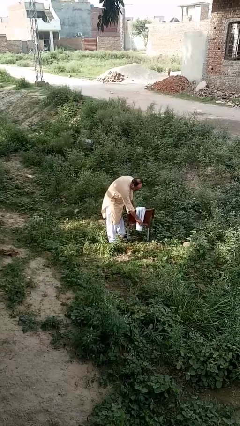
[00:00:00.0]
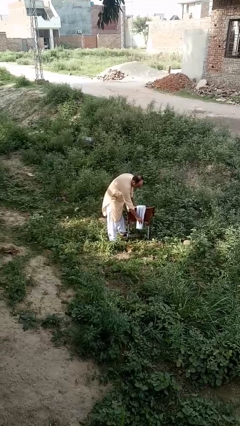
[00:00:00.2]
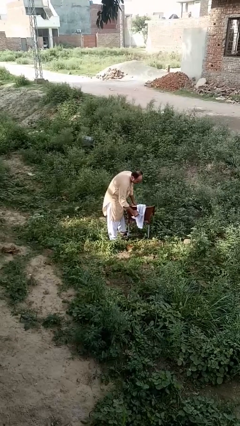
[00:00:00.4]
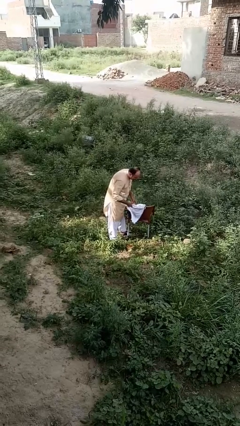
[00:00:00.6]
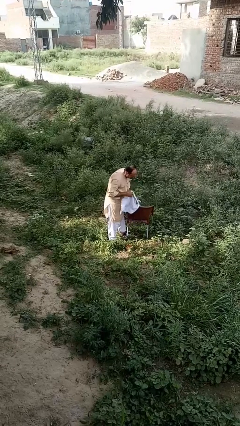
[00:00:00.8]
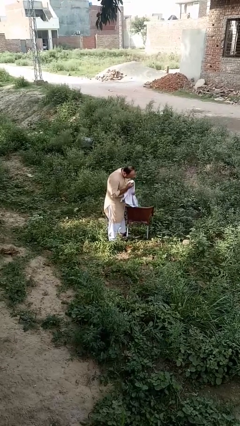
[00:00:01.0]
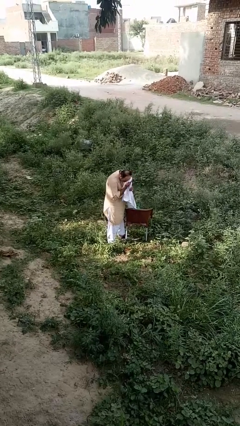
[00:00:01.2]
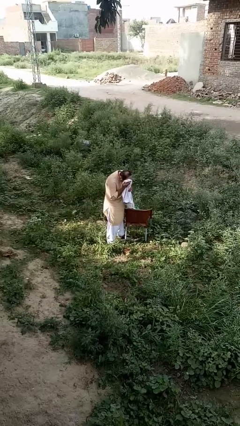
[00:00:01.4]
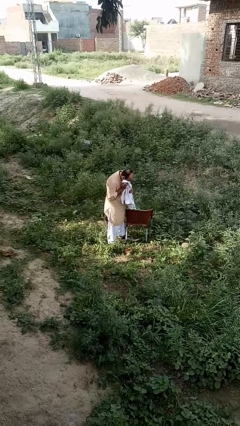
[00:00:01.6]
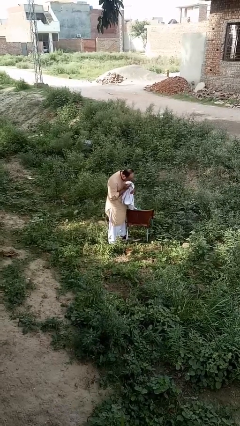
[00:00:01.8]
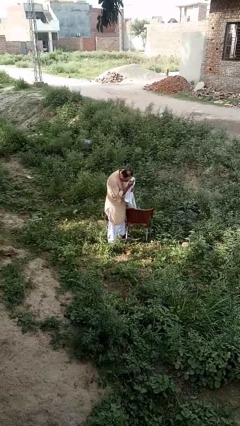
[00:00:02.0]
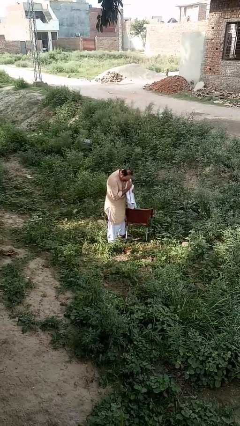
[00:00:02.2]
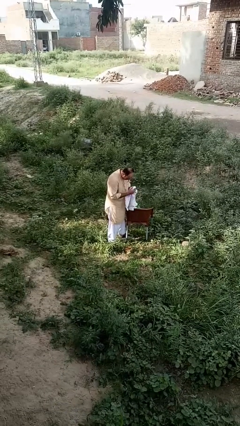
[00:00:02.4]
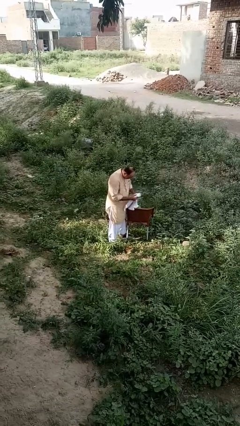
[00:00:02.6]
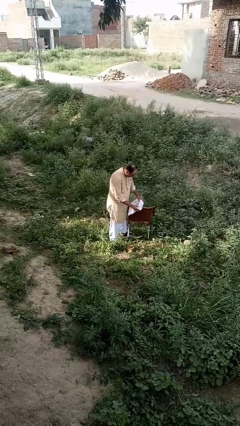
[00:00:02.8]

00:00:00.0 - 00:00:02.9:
person dries face with towel

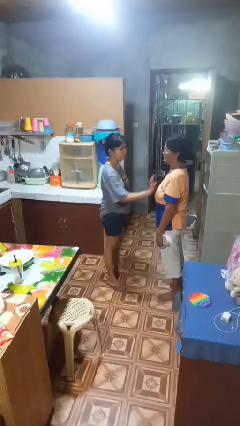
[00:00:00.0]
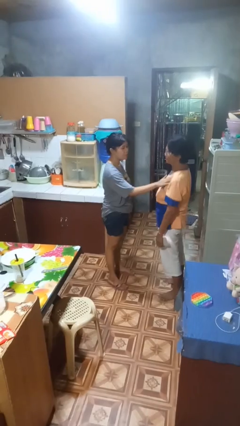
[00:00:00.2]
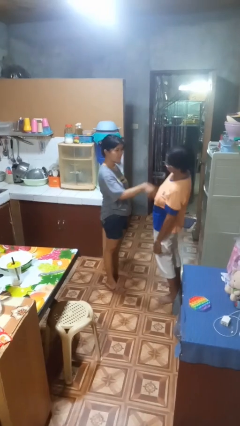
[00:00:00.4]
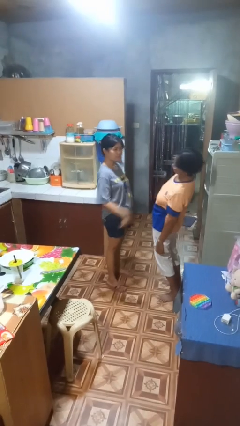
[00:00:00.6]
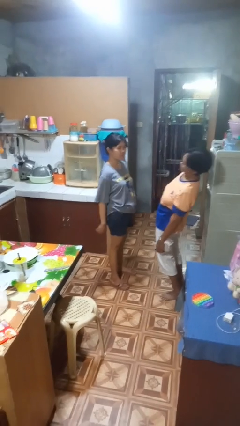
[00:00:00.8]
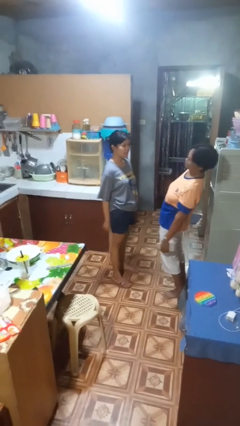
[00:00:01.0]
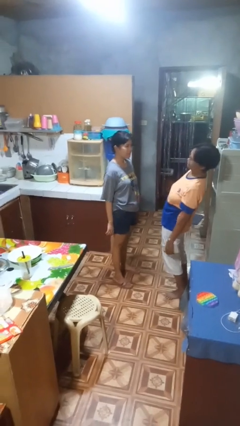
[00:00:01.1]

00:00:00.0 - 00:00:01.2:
person shoves person

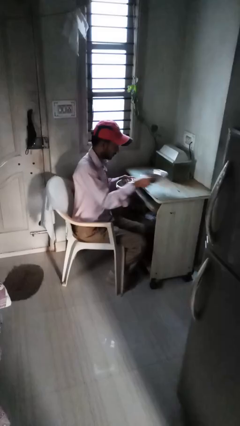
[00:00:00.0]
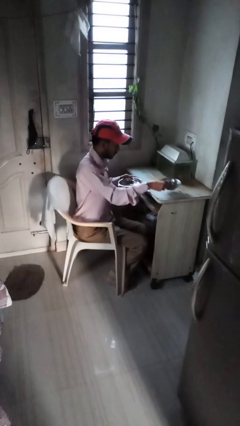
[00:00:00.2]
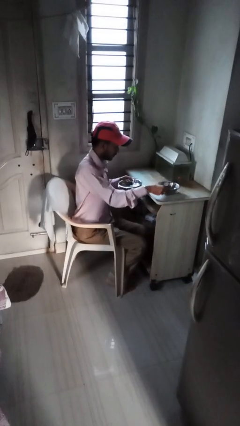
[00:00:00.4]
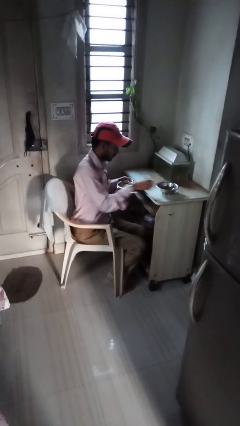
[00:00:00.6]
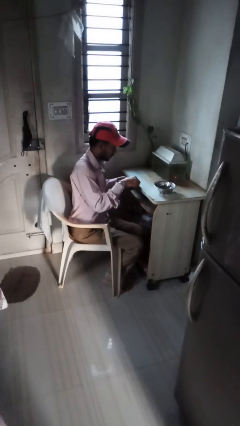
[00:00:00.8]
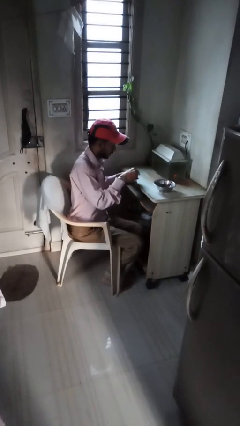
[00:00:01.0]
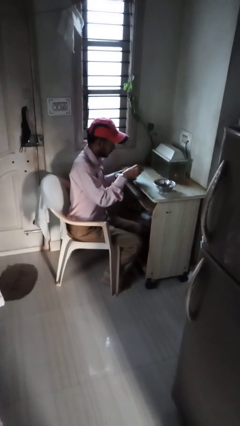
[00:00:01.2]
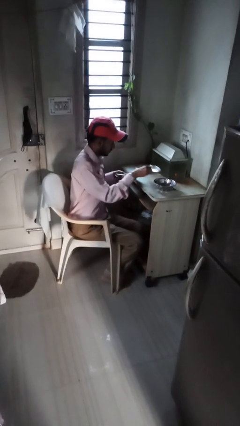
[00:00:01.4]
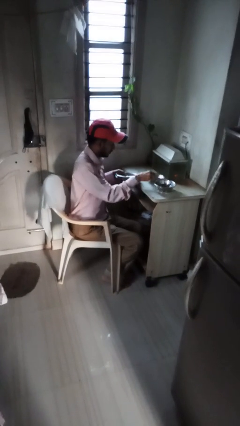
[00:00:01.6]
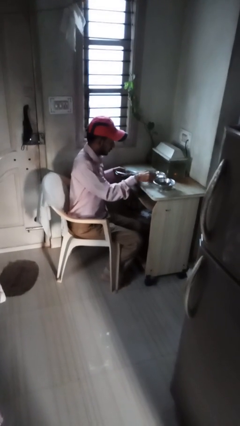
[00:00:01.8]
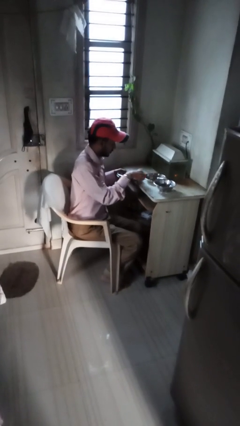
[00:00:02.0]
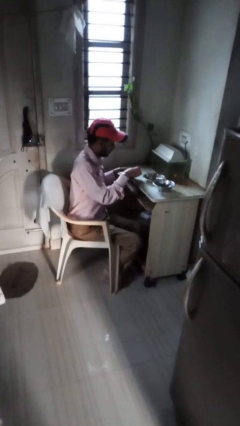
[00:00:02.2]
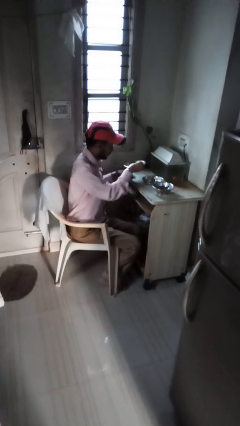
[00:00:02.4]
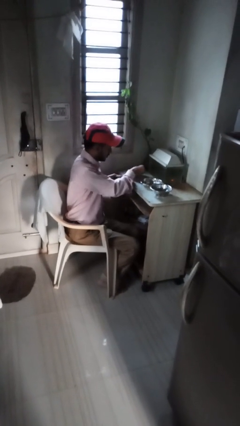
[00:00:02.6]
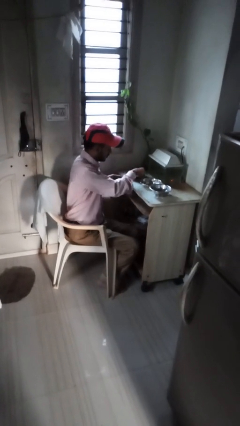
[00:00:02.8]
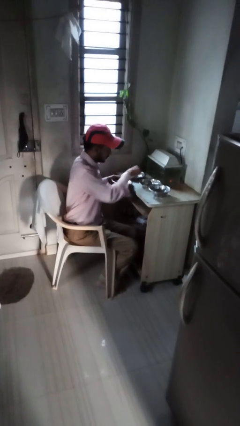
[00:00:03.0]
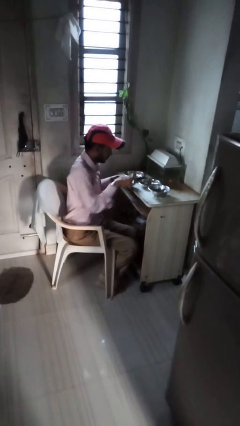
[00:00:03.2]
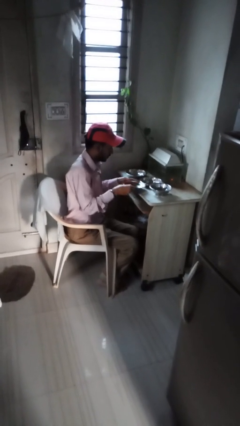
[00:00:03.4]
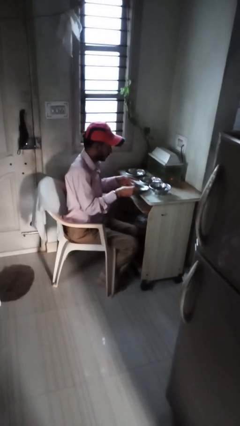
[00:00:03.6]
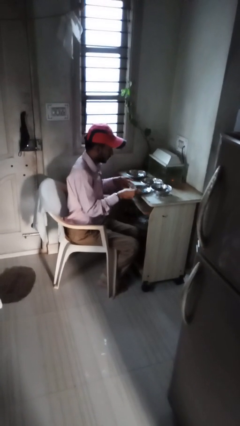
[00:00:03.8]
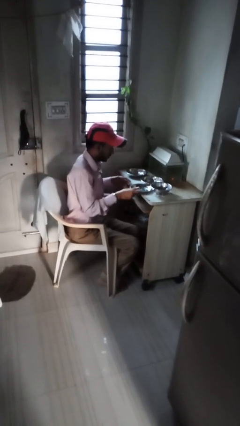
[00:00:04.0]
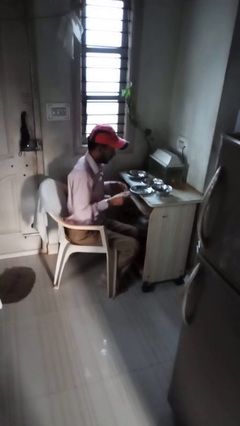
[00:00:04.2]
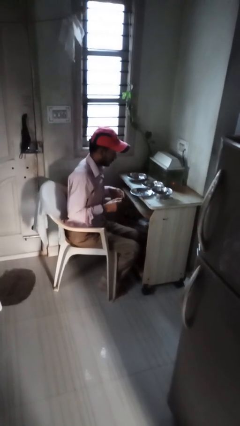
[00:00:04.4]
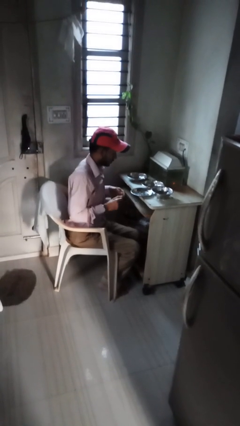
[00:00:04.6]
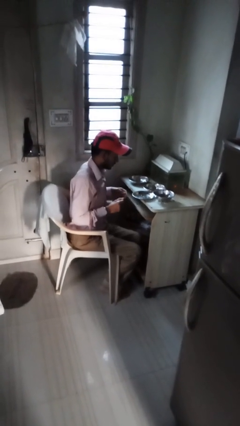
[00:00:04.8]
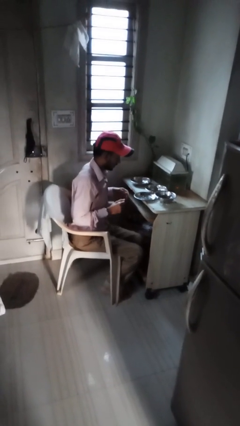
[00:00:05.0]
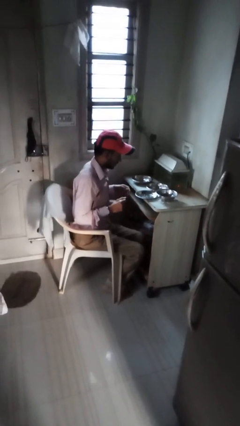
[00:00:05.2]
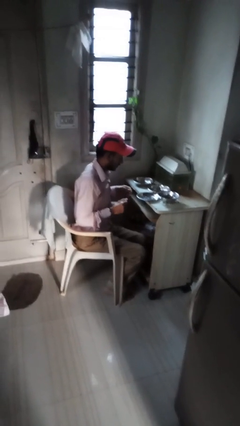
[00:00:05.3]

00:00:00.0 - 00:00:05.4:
person sets table

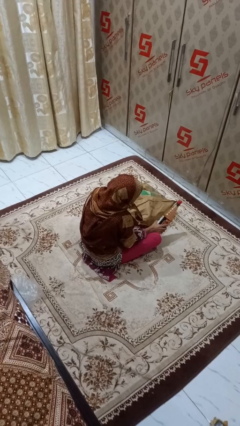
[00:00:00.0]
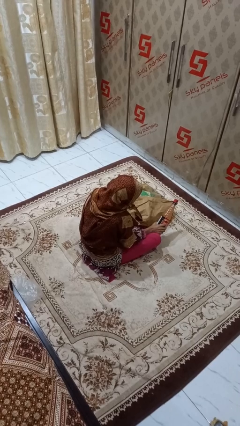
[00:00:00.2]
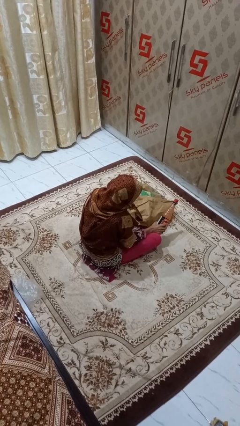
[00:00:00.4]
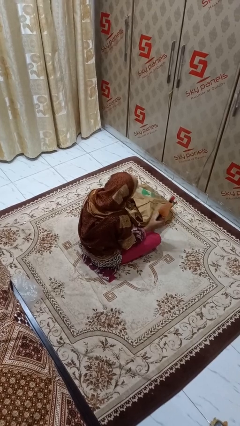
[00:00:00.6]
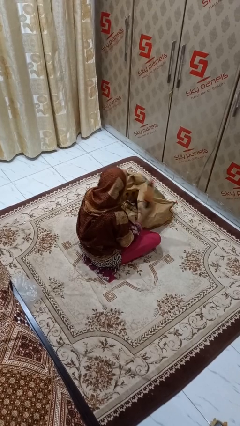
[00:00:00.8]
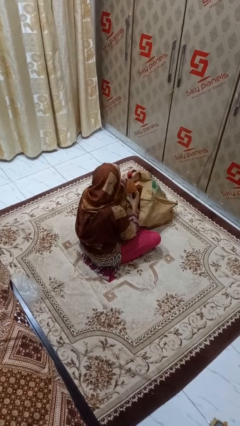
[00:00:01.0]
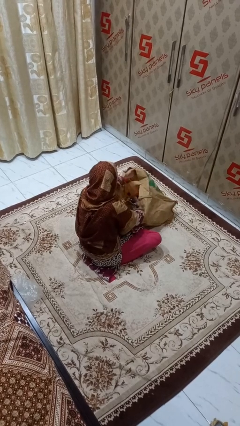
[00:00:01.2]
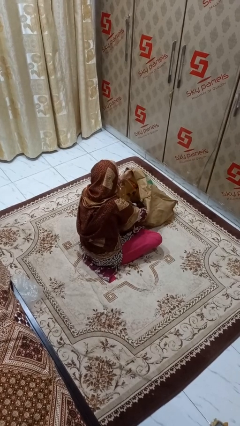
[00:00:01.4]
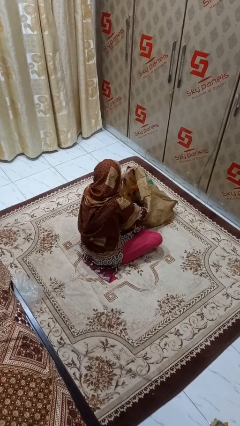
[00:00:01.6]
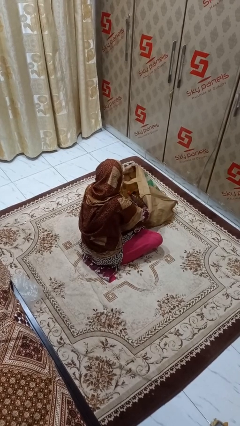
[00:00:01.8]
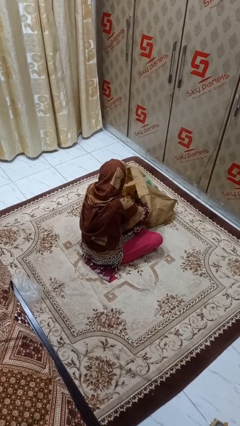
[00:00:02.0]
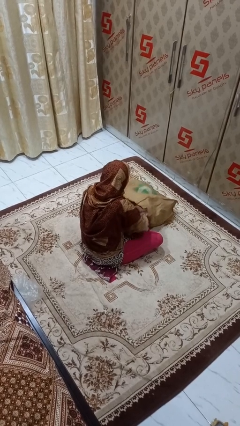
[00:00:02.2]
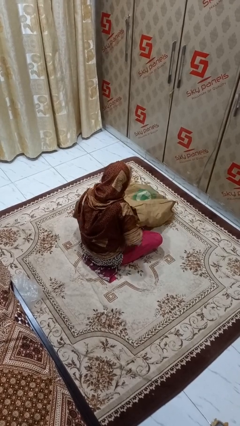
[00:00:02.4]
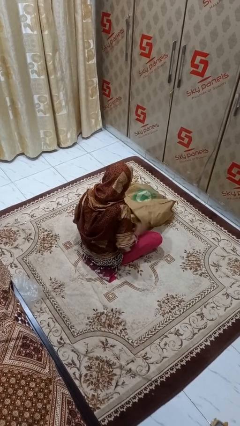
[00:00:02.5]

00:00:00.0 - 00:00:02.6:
person puts object into bag

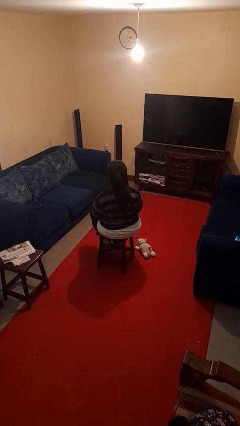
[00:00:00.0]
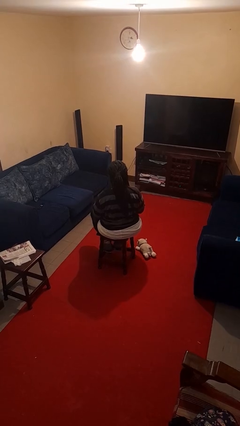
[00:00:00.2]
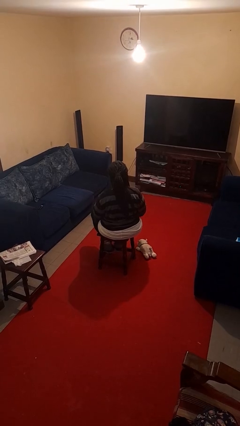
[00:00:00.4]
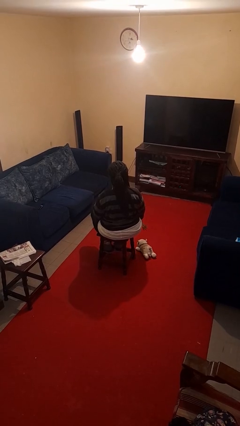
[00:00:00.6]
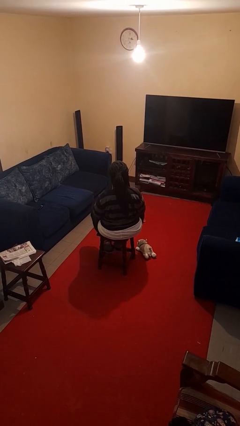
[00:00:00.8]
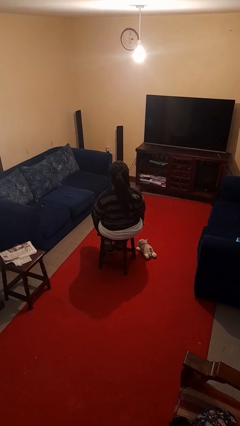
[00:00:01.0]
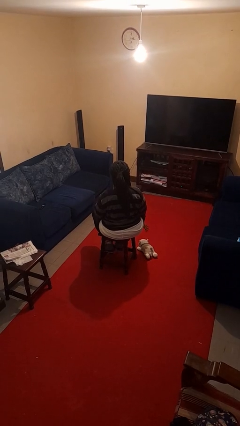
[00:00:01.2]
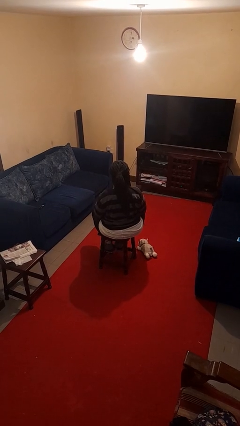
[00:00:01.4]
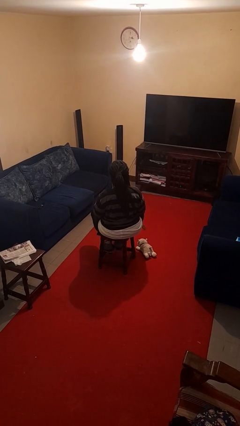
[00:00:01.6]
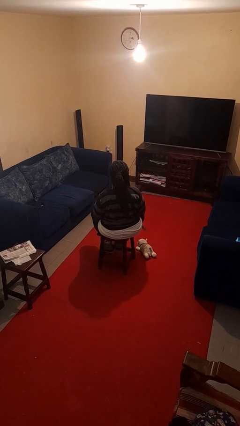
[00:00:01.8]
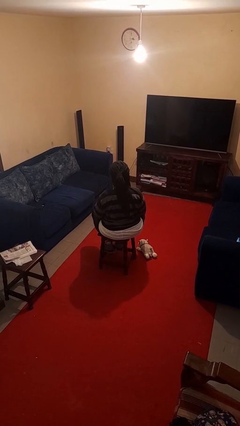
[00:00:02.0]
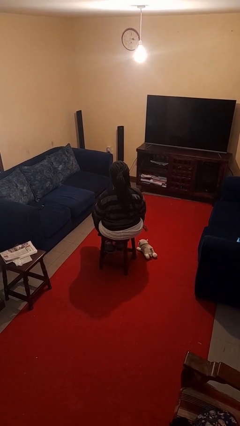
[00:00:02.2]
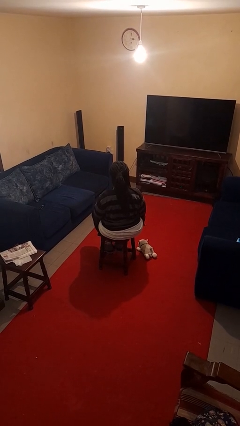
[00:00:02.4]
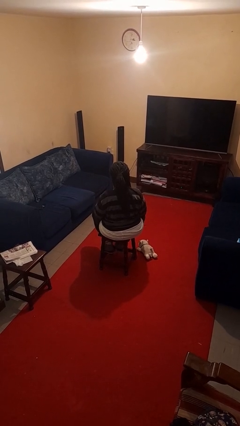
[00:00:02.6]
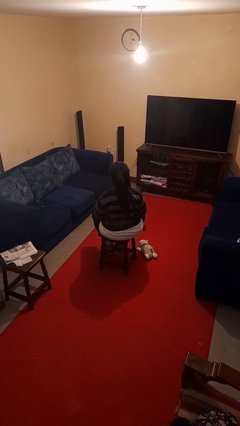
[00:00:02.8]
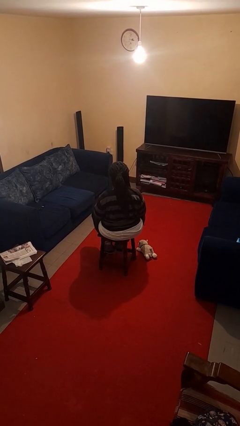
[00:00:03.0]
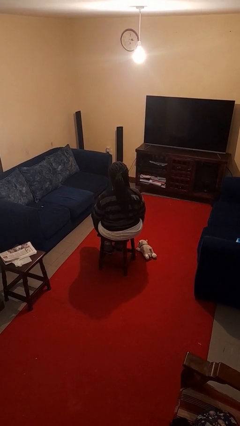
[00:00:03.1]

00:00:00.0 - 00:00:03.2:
person waves hand over object

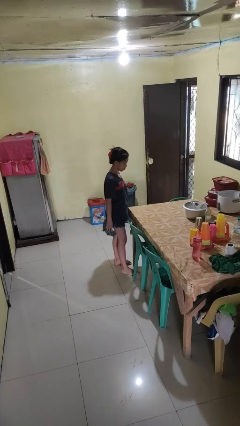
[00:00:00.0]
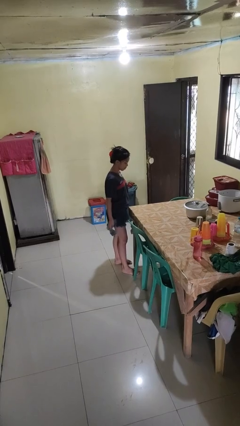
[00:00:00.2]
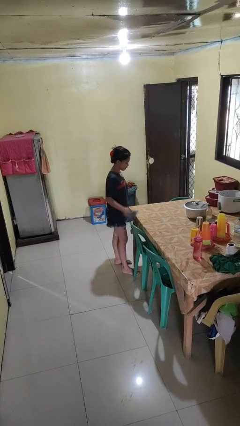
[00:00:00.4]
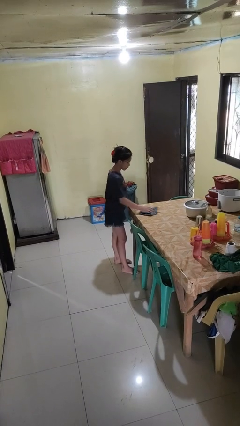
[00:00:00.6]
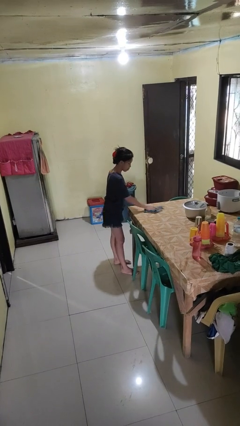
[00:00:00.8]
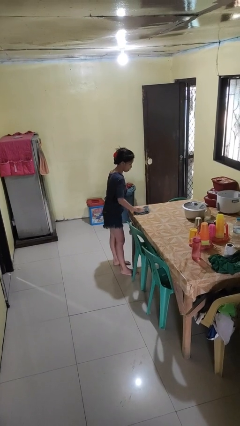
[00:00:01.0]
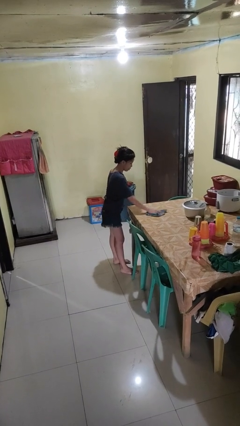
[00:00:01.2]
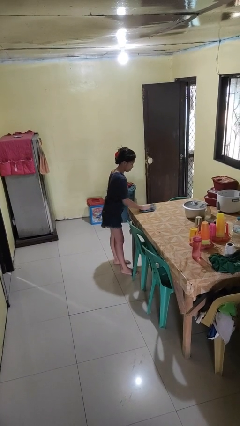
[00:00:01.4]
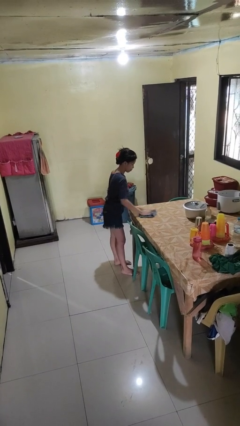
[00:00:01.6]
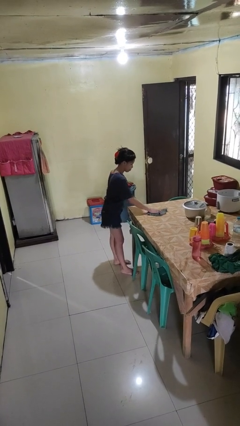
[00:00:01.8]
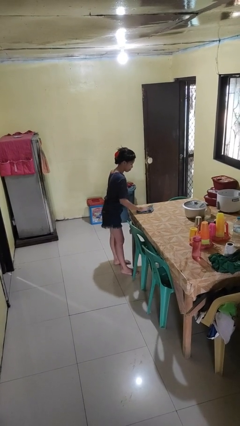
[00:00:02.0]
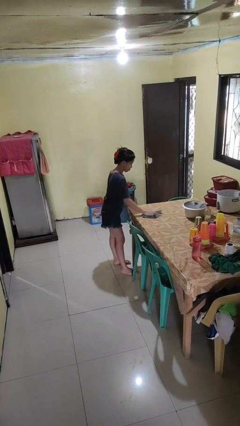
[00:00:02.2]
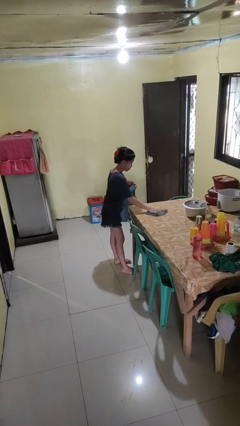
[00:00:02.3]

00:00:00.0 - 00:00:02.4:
person cleans table with rag
